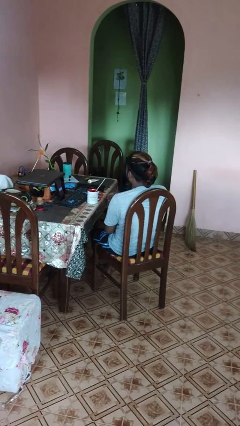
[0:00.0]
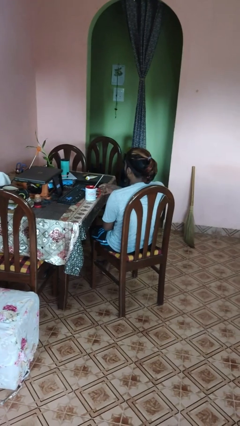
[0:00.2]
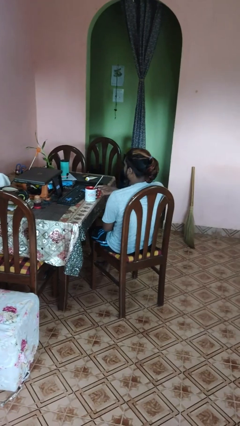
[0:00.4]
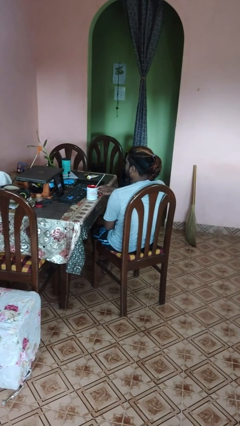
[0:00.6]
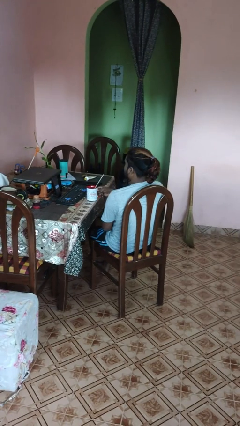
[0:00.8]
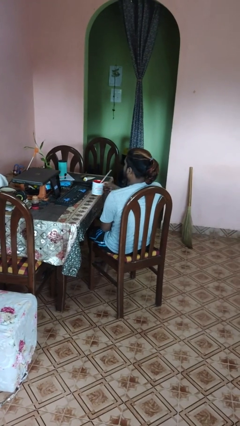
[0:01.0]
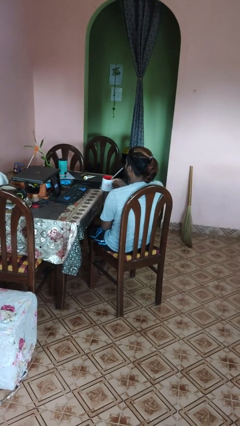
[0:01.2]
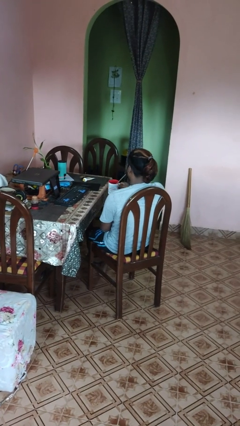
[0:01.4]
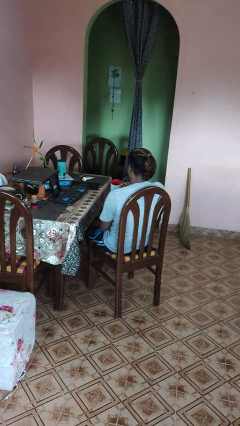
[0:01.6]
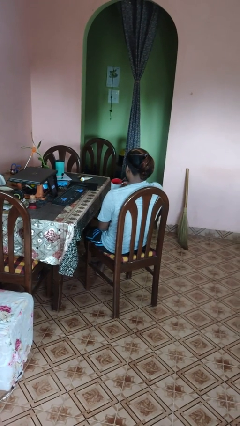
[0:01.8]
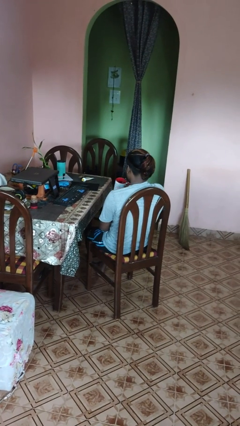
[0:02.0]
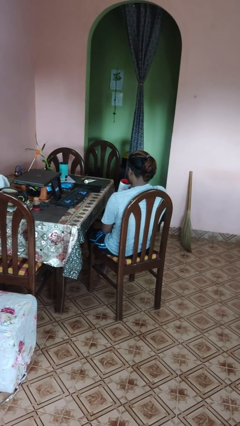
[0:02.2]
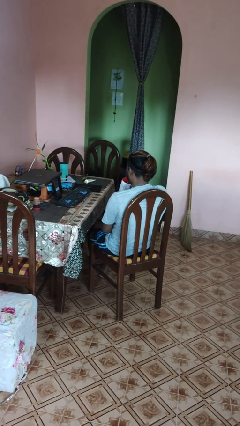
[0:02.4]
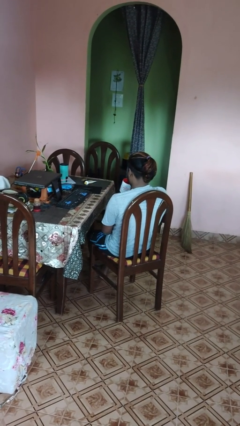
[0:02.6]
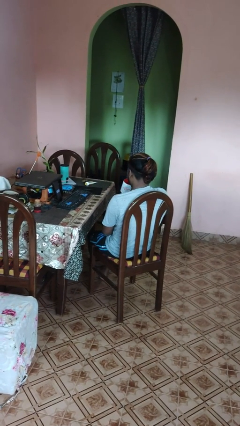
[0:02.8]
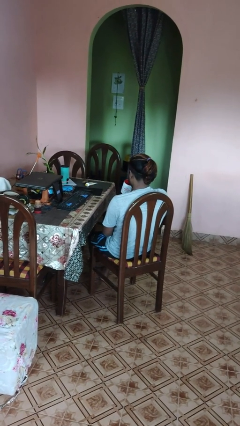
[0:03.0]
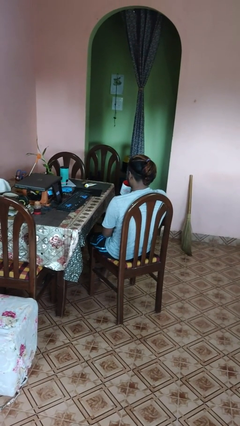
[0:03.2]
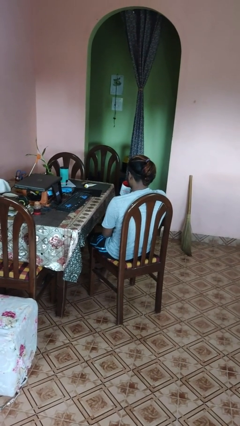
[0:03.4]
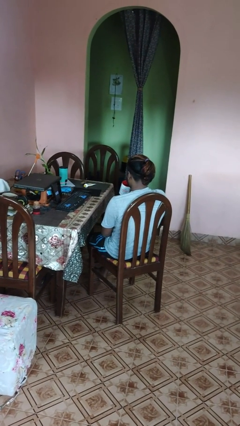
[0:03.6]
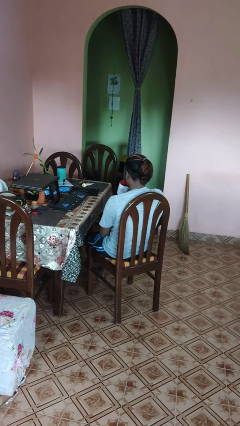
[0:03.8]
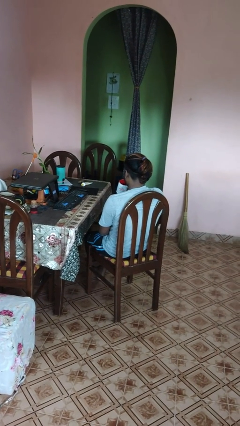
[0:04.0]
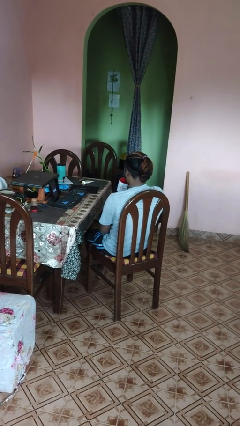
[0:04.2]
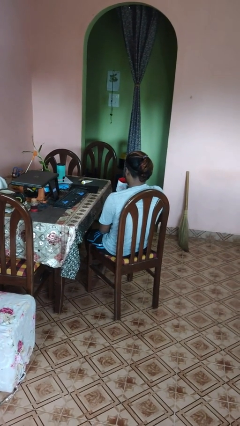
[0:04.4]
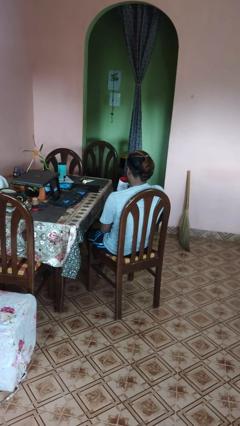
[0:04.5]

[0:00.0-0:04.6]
person drinks from straw

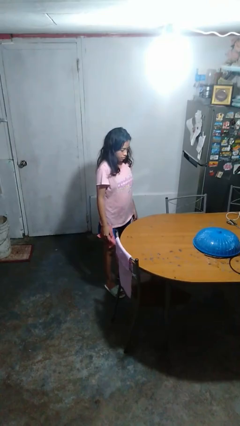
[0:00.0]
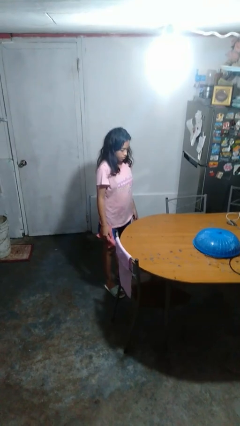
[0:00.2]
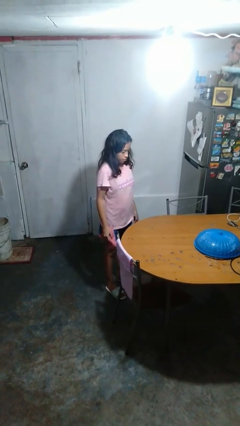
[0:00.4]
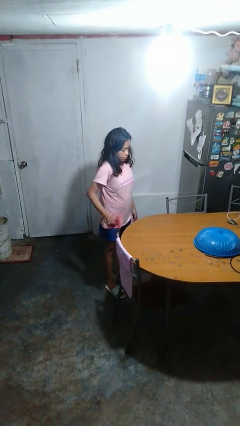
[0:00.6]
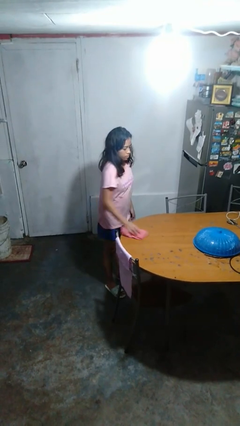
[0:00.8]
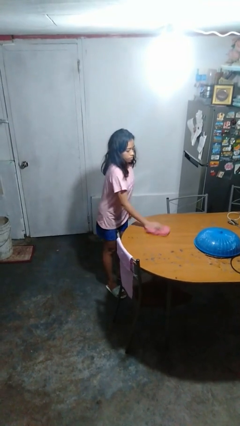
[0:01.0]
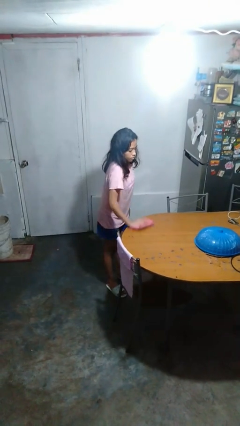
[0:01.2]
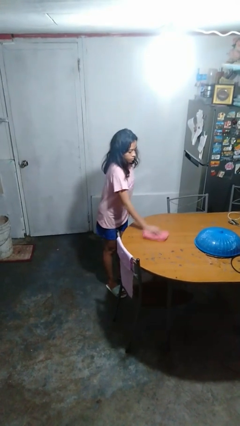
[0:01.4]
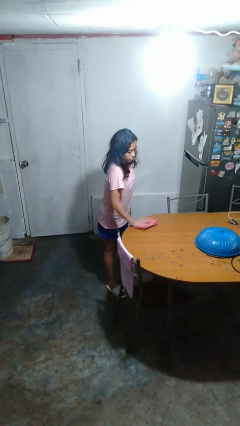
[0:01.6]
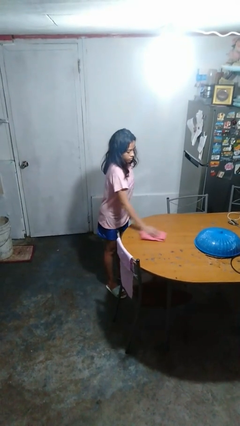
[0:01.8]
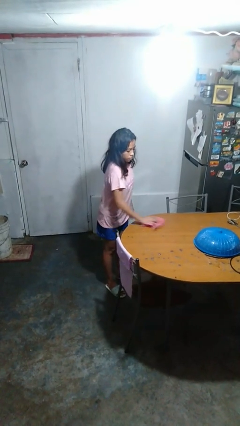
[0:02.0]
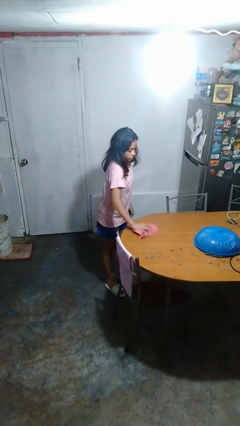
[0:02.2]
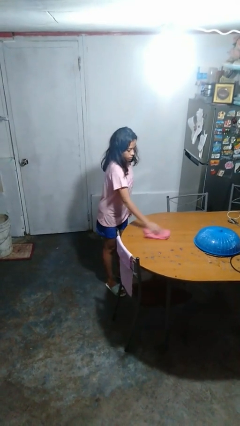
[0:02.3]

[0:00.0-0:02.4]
person cleans table with rag

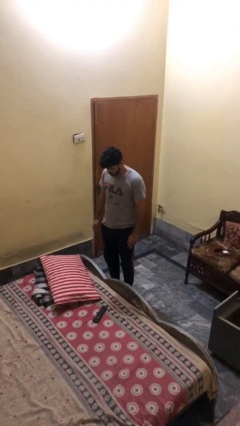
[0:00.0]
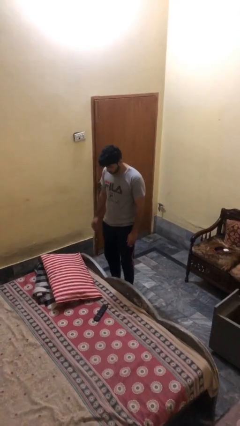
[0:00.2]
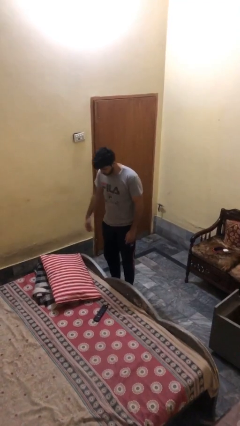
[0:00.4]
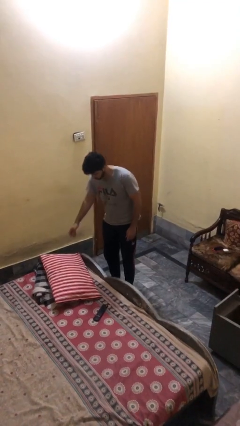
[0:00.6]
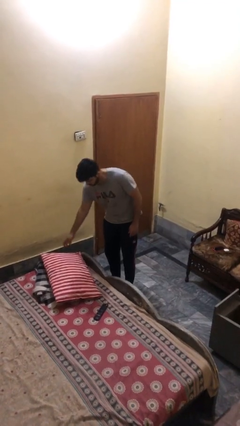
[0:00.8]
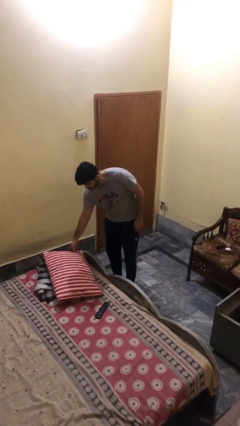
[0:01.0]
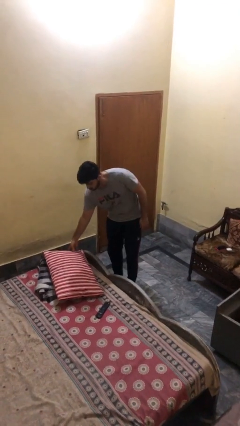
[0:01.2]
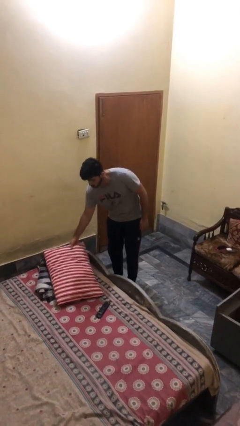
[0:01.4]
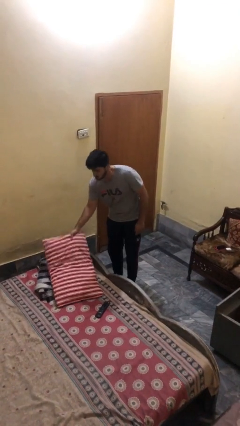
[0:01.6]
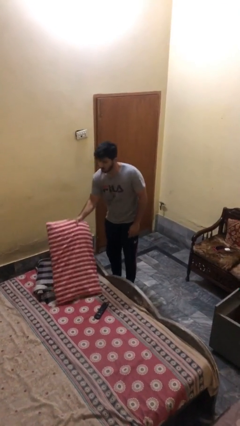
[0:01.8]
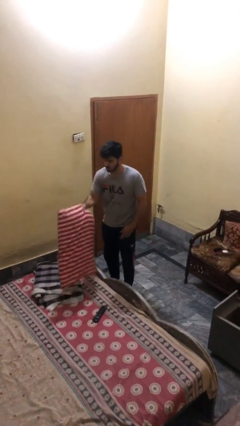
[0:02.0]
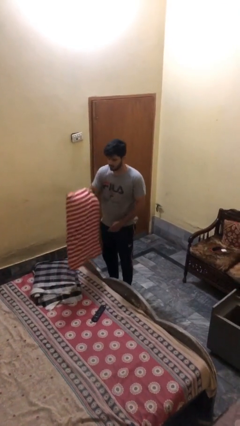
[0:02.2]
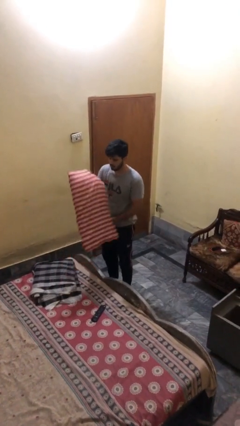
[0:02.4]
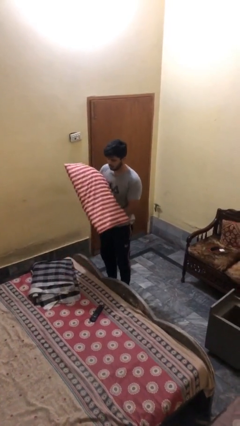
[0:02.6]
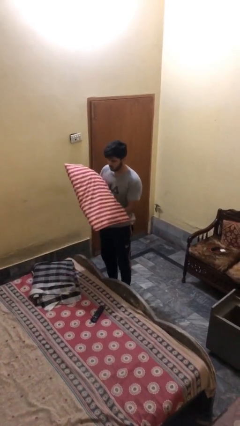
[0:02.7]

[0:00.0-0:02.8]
person picks up object from bed

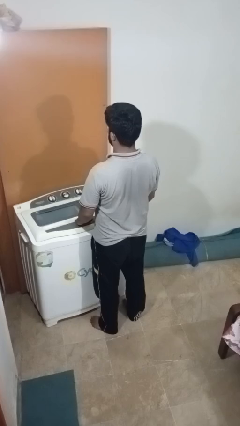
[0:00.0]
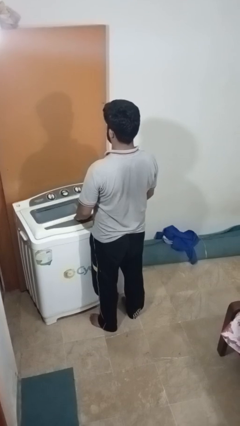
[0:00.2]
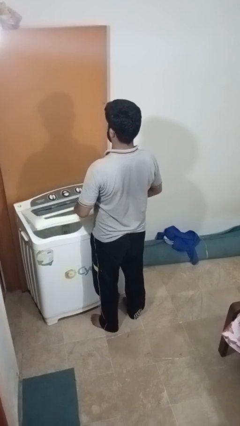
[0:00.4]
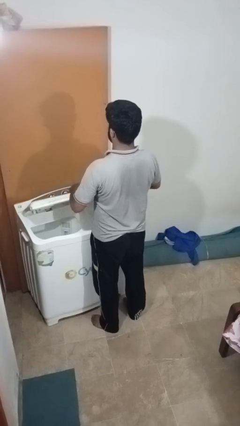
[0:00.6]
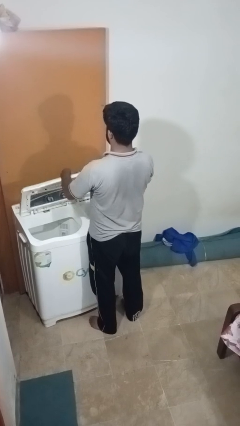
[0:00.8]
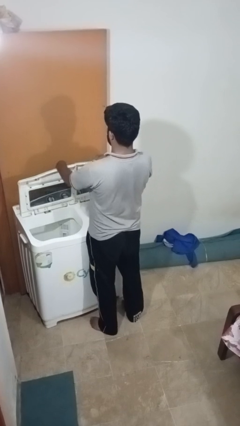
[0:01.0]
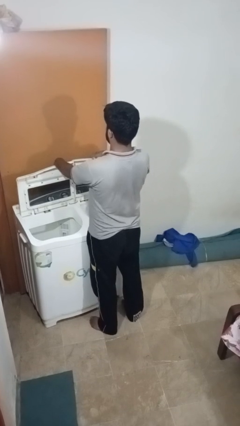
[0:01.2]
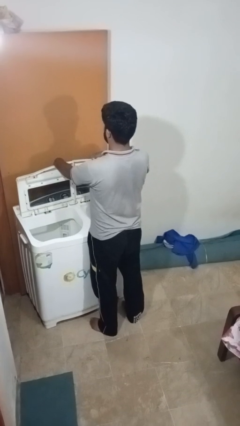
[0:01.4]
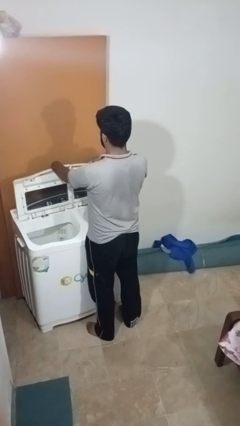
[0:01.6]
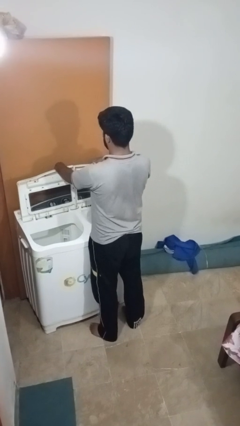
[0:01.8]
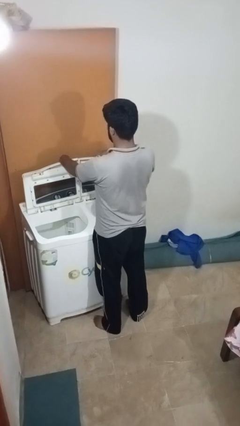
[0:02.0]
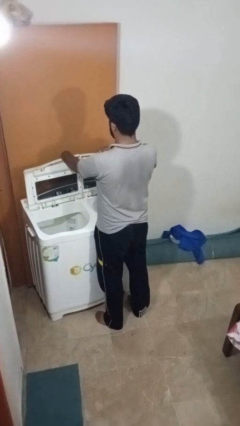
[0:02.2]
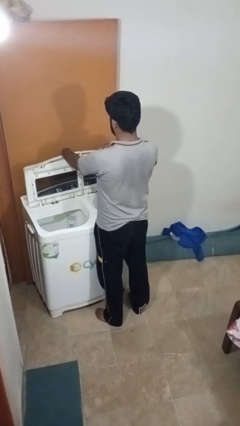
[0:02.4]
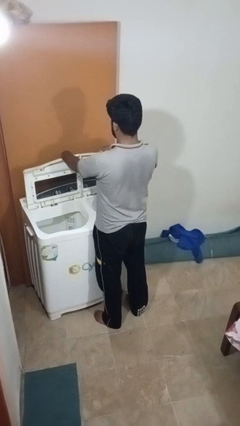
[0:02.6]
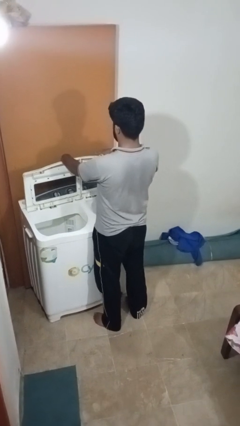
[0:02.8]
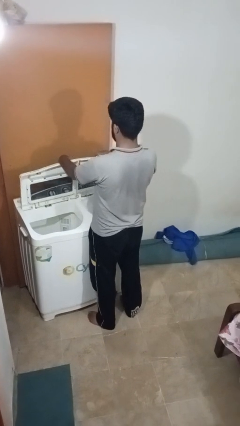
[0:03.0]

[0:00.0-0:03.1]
person opens clothes washer

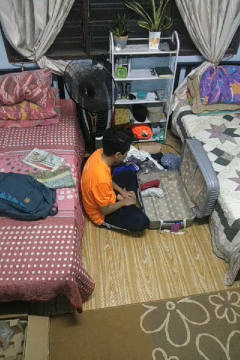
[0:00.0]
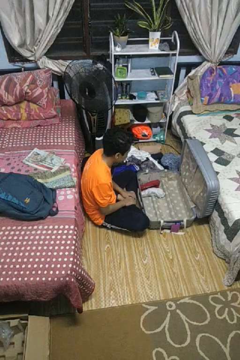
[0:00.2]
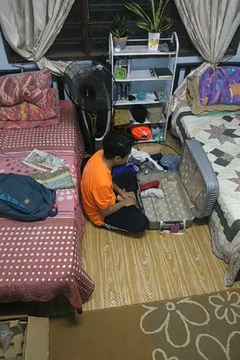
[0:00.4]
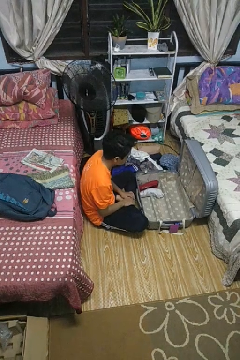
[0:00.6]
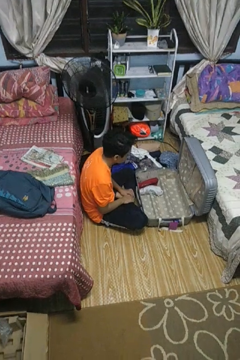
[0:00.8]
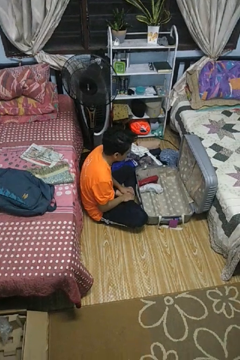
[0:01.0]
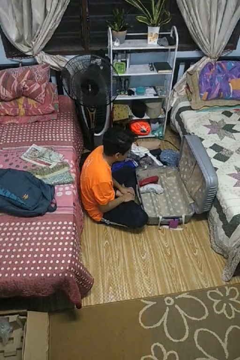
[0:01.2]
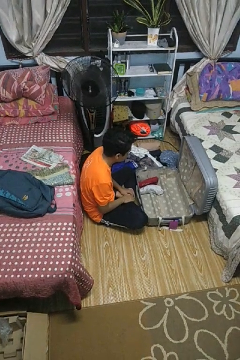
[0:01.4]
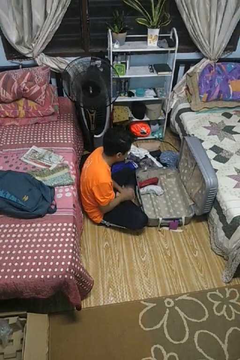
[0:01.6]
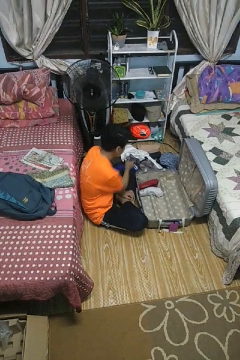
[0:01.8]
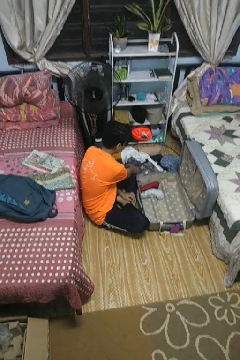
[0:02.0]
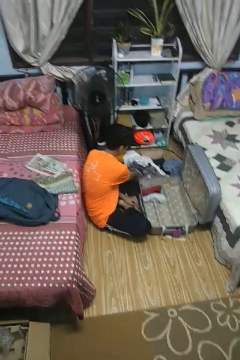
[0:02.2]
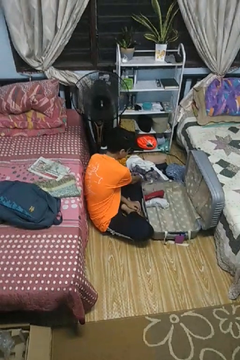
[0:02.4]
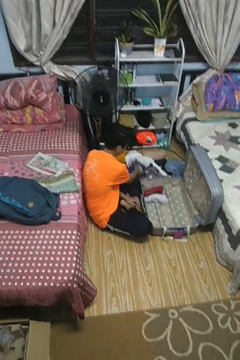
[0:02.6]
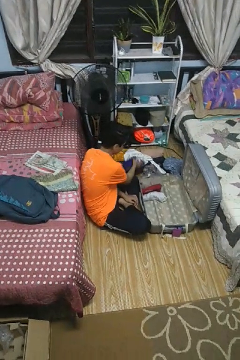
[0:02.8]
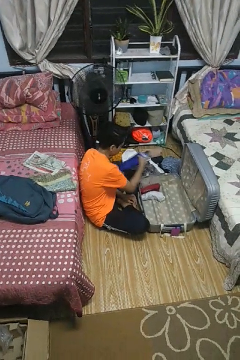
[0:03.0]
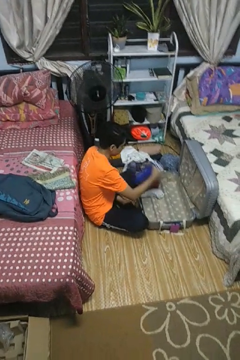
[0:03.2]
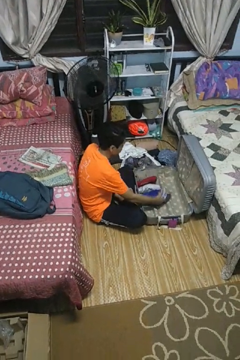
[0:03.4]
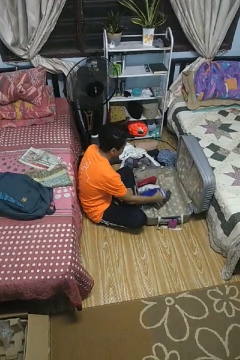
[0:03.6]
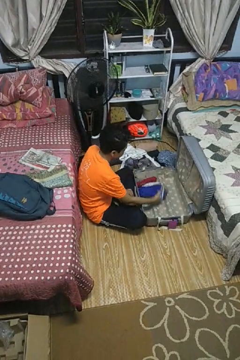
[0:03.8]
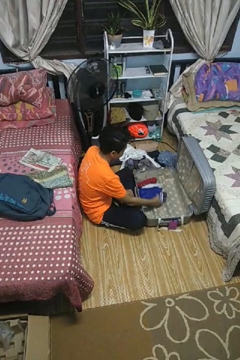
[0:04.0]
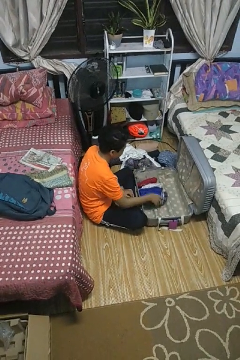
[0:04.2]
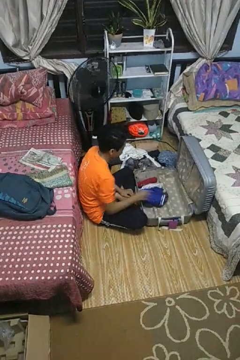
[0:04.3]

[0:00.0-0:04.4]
person loads clothes into suitcase

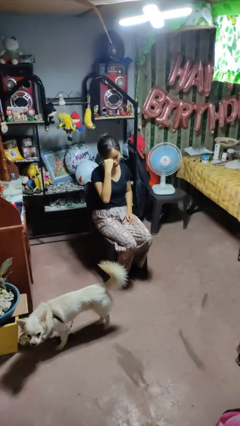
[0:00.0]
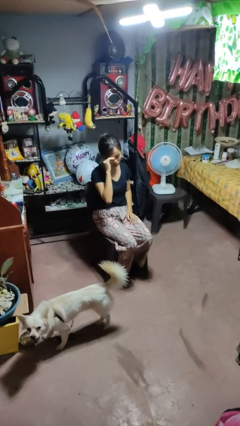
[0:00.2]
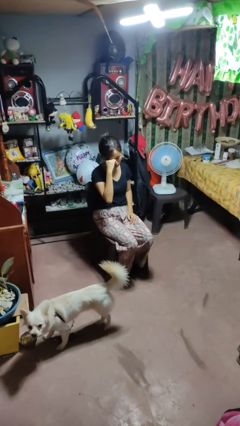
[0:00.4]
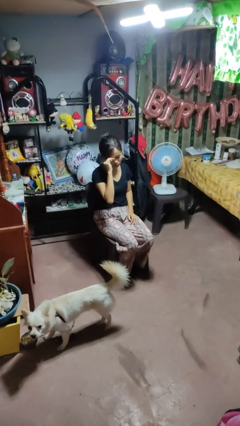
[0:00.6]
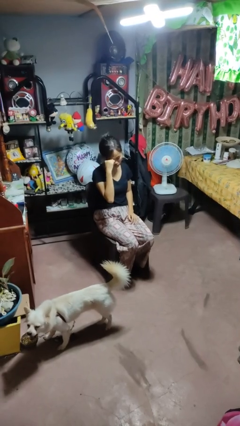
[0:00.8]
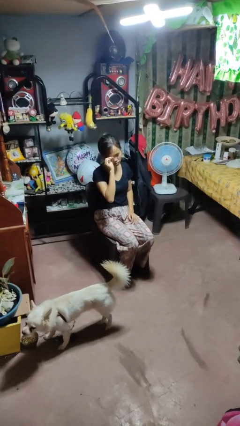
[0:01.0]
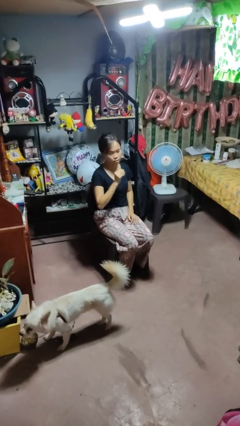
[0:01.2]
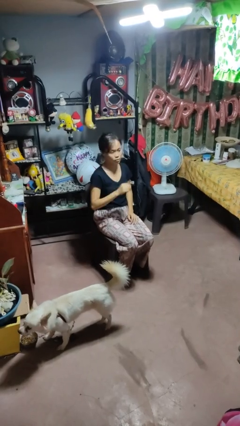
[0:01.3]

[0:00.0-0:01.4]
person rubs eyes

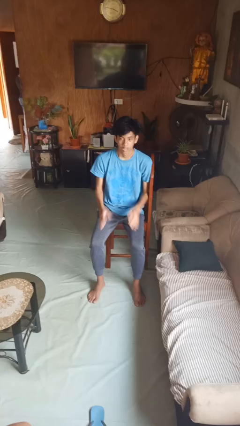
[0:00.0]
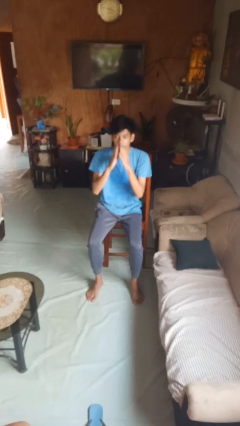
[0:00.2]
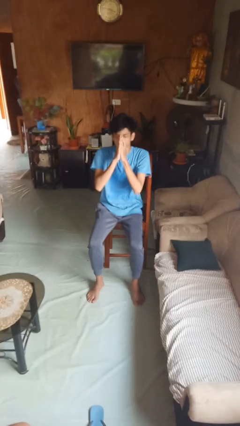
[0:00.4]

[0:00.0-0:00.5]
person sneezes into hand
